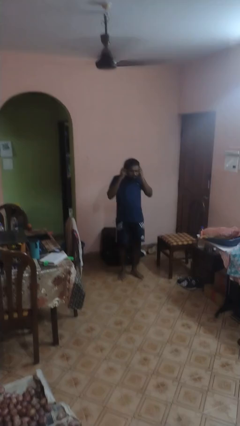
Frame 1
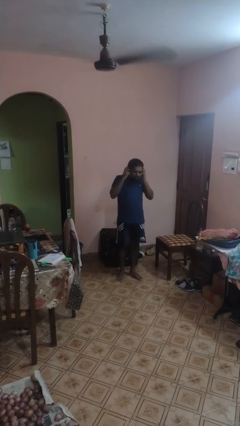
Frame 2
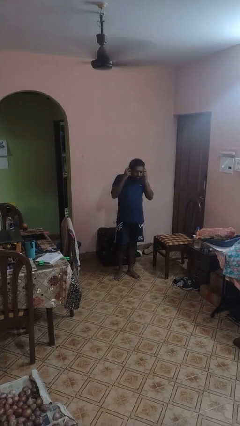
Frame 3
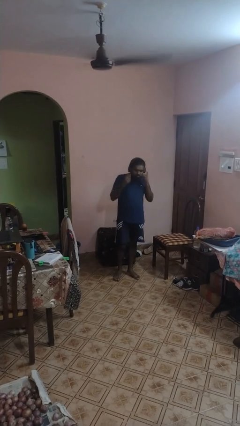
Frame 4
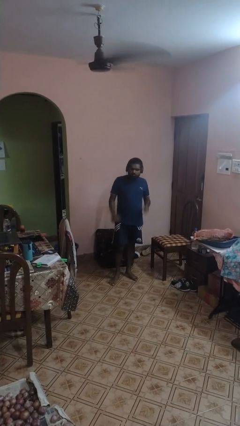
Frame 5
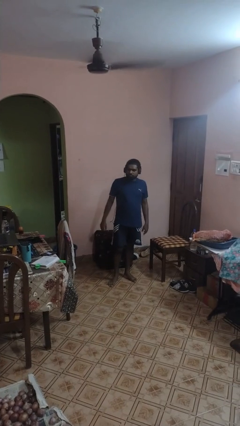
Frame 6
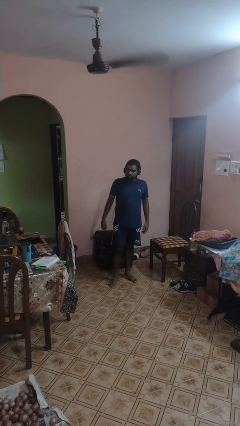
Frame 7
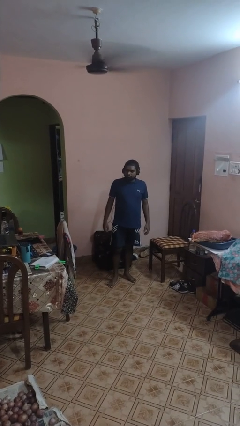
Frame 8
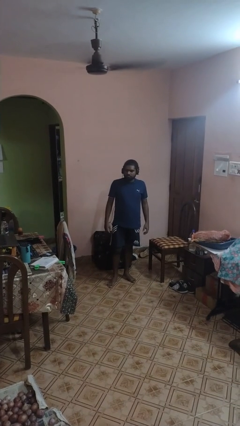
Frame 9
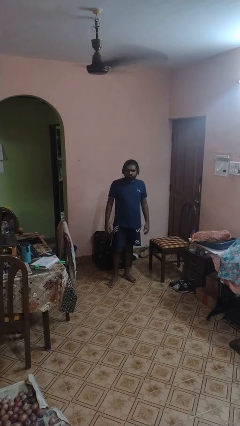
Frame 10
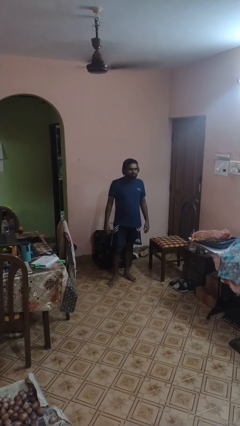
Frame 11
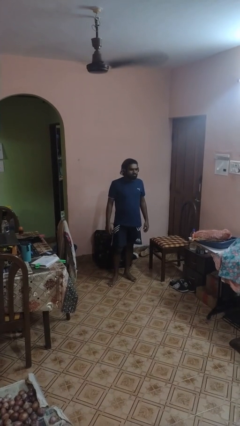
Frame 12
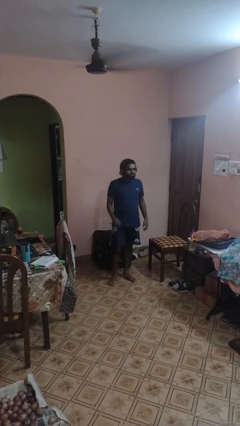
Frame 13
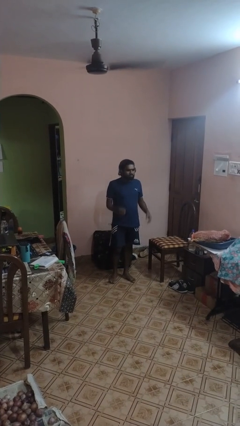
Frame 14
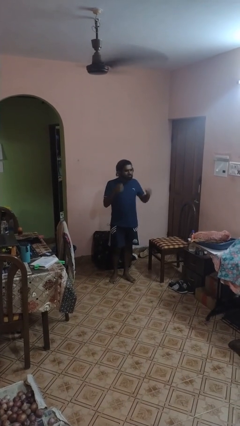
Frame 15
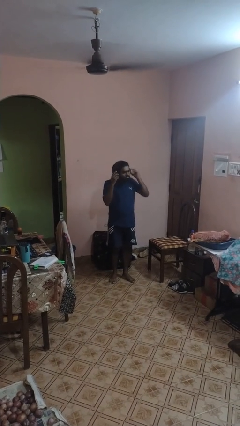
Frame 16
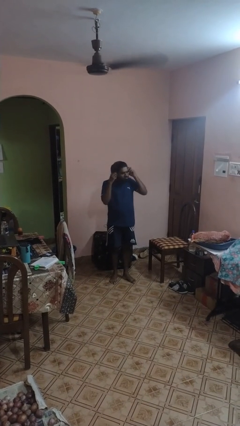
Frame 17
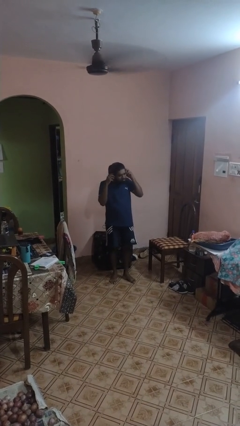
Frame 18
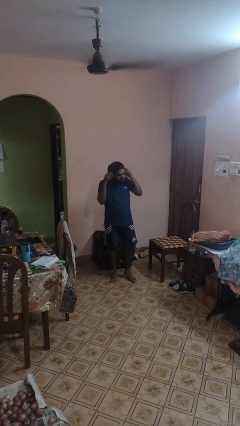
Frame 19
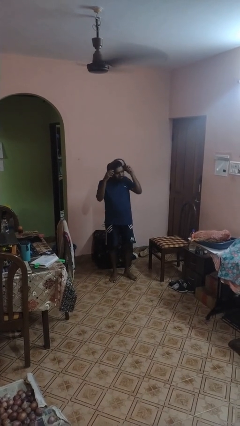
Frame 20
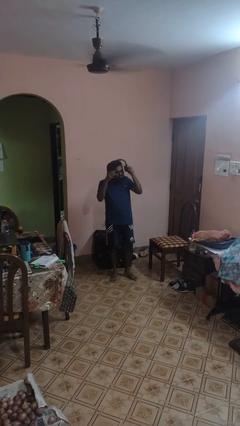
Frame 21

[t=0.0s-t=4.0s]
person puts on headphones

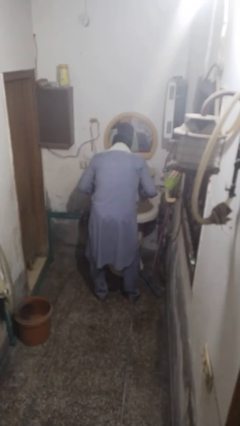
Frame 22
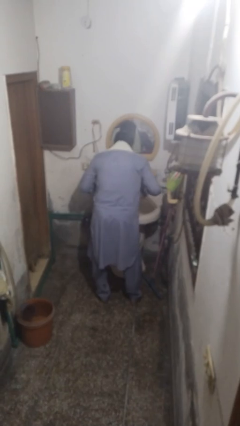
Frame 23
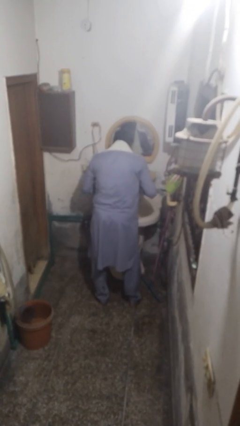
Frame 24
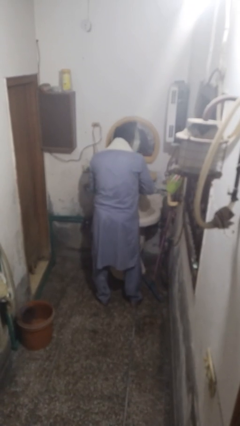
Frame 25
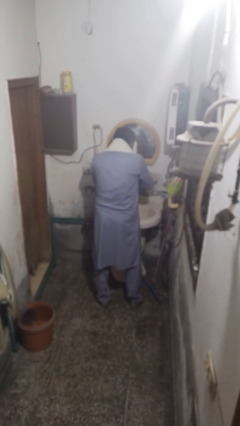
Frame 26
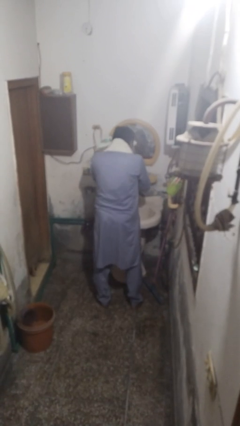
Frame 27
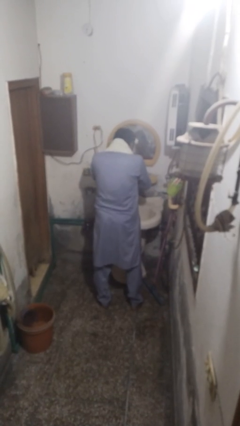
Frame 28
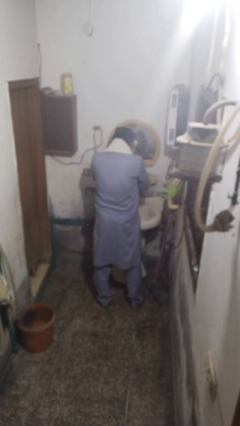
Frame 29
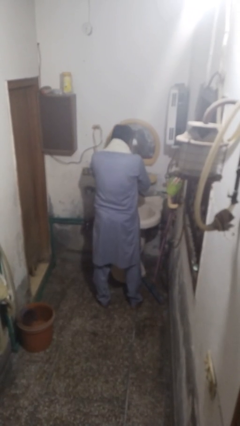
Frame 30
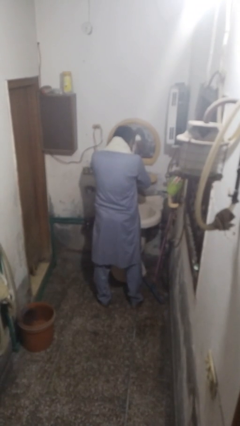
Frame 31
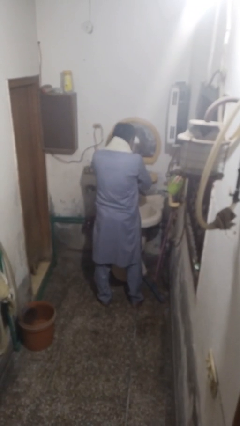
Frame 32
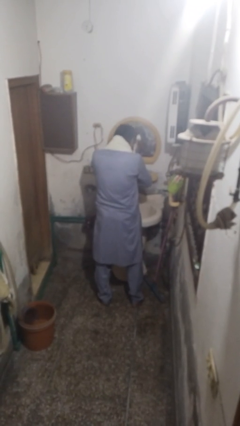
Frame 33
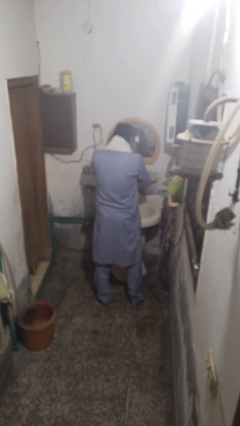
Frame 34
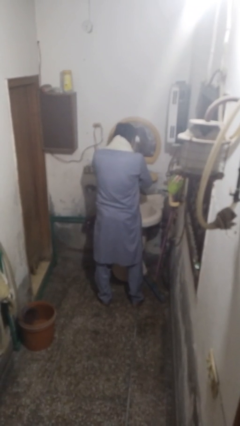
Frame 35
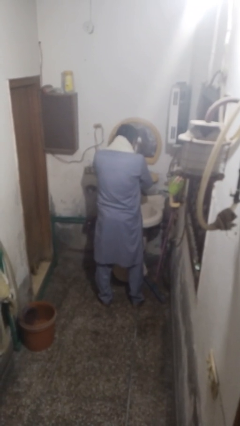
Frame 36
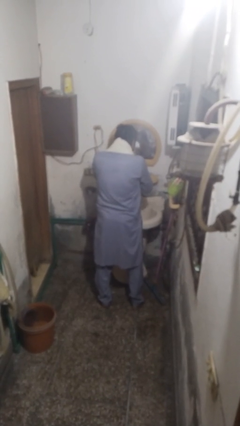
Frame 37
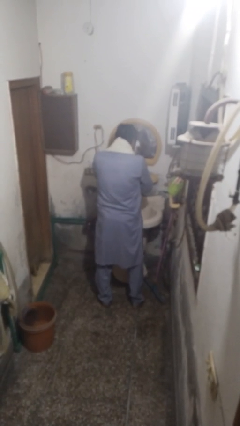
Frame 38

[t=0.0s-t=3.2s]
person dries face with towel

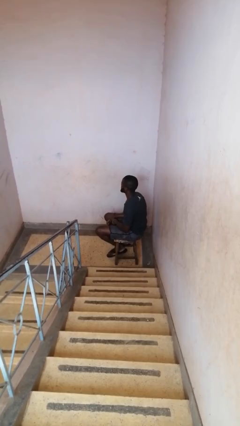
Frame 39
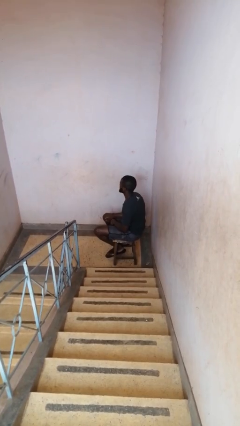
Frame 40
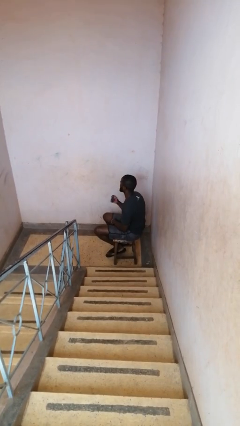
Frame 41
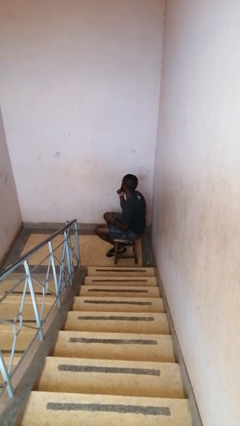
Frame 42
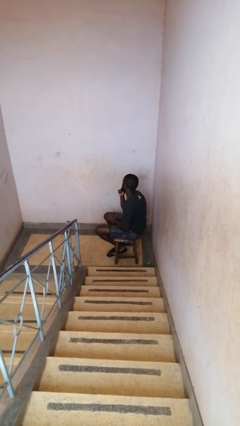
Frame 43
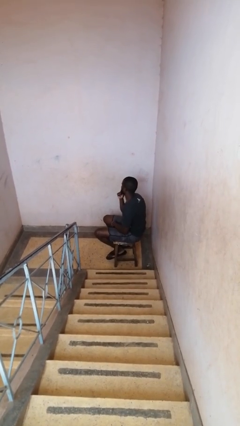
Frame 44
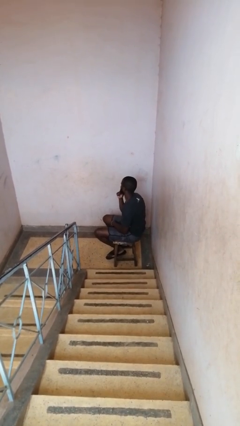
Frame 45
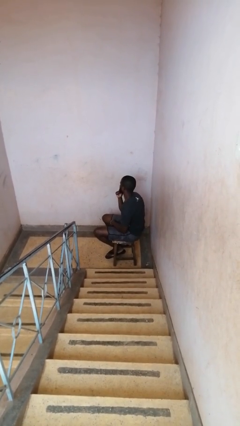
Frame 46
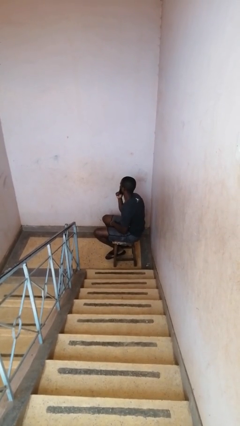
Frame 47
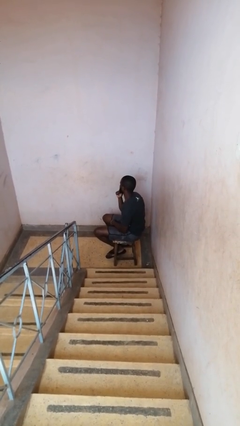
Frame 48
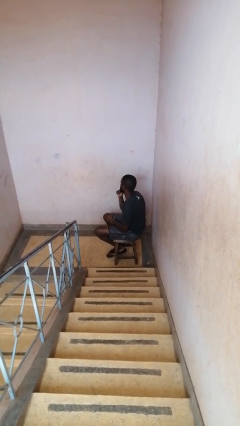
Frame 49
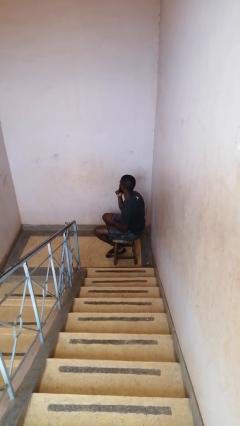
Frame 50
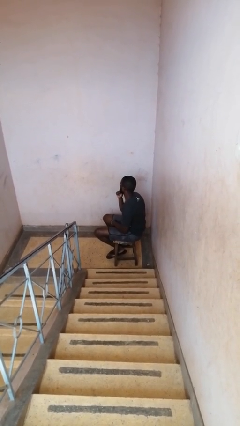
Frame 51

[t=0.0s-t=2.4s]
person strokes chin

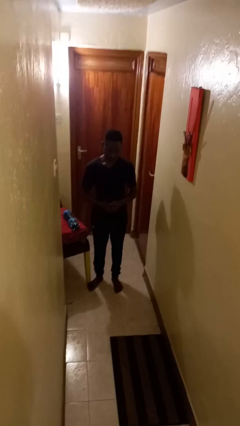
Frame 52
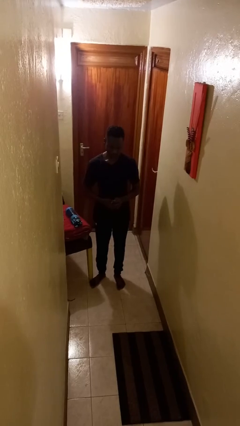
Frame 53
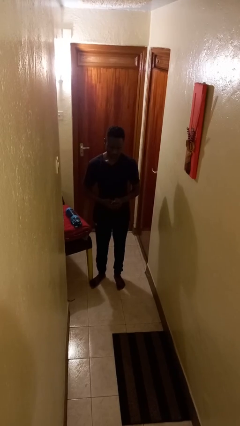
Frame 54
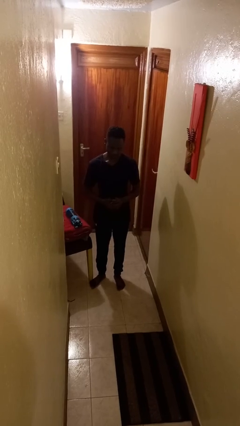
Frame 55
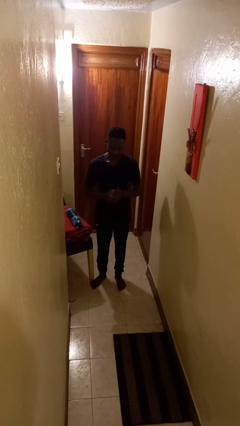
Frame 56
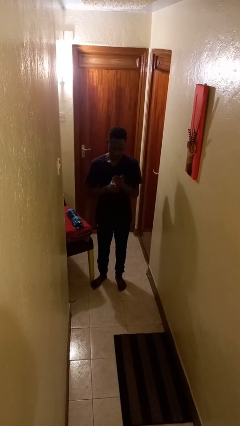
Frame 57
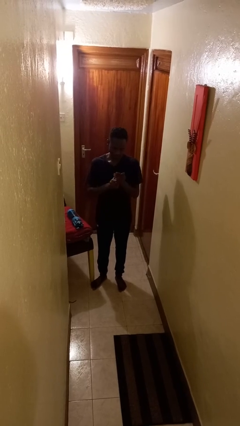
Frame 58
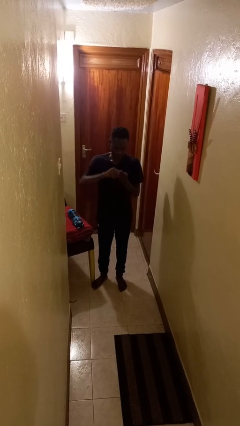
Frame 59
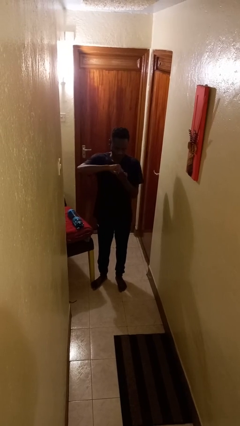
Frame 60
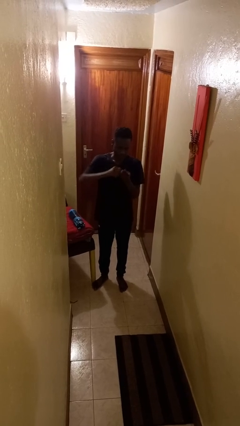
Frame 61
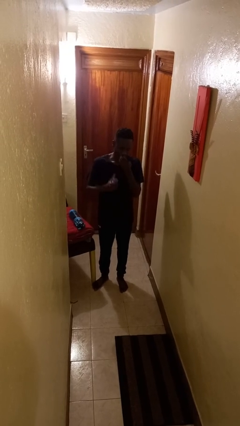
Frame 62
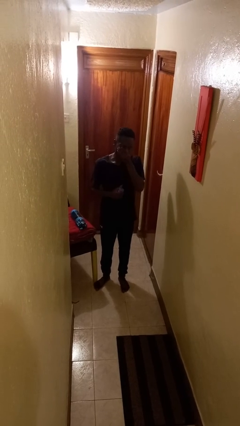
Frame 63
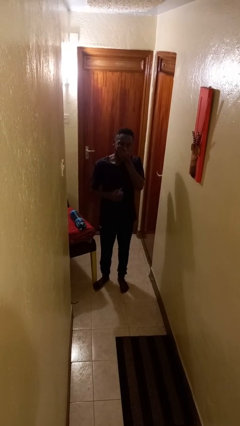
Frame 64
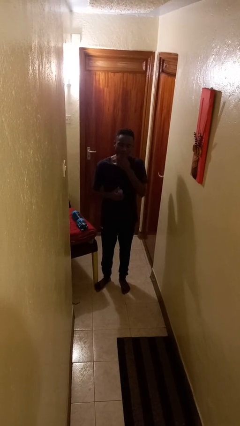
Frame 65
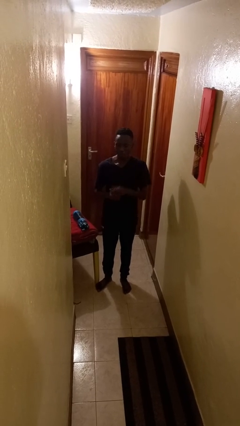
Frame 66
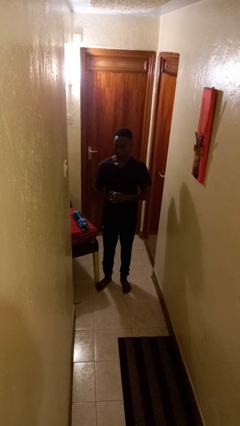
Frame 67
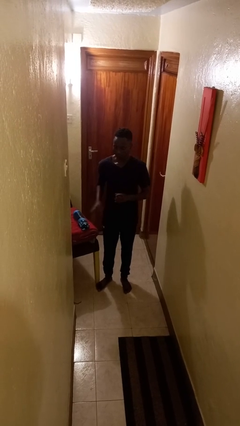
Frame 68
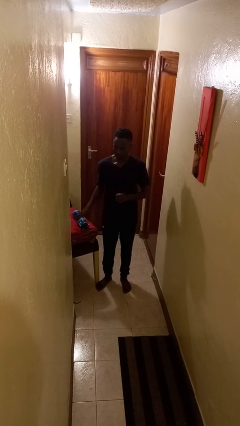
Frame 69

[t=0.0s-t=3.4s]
person takes medicine pills

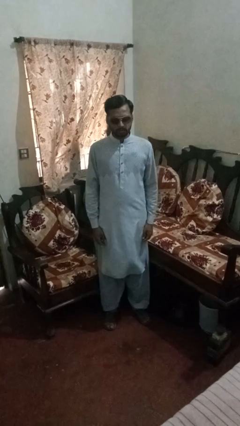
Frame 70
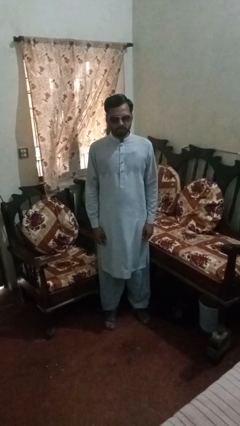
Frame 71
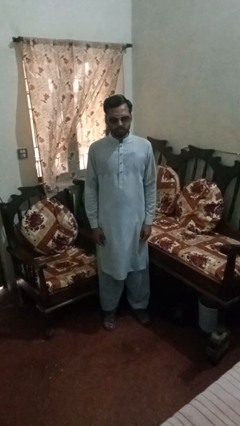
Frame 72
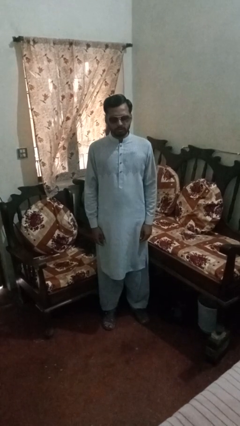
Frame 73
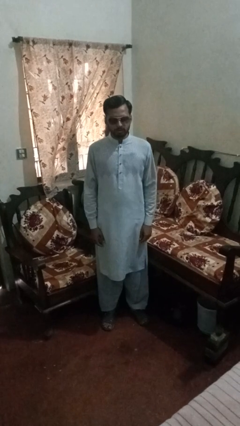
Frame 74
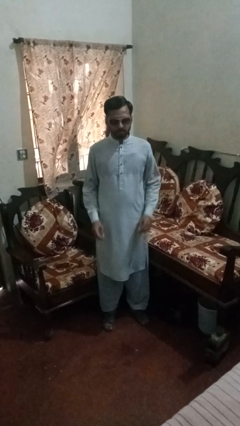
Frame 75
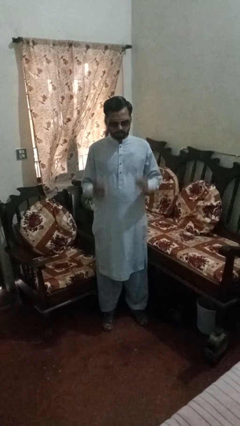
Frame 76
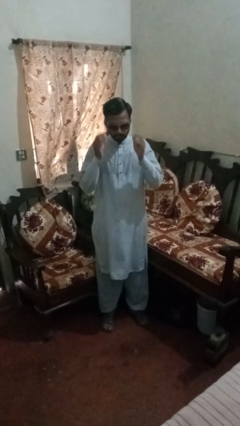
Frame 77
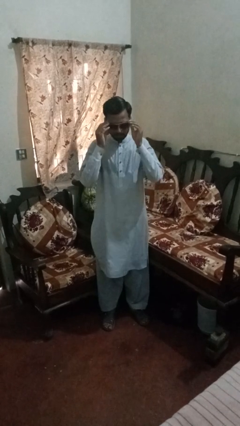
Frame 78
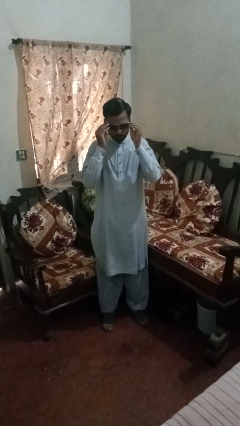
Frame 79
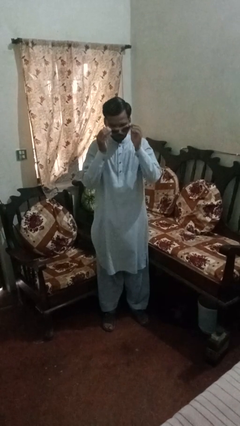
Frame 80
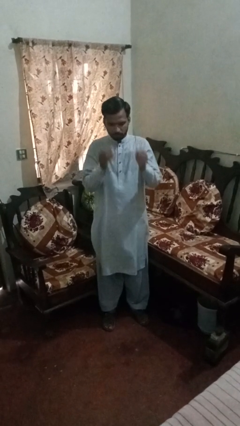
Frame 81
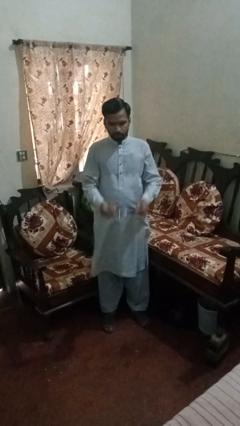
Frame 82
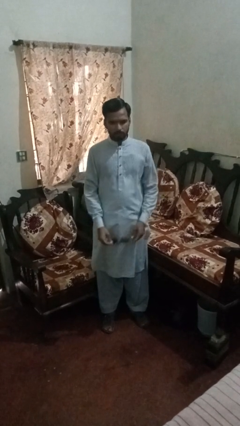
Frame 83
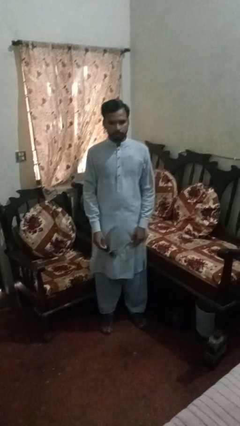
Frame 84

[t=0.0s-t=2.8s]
person takes off sunglasses

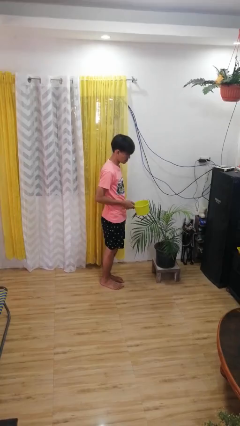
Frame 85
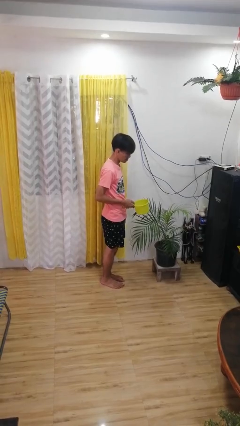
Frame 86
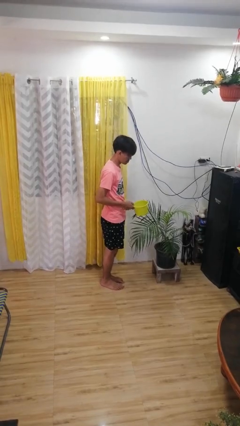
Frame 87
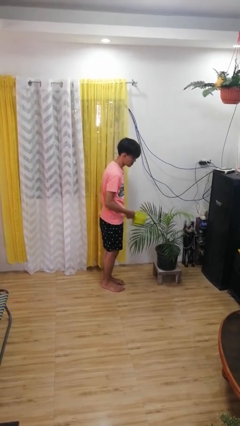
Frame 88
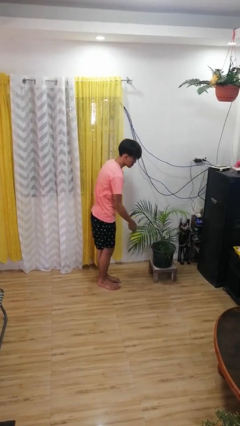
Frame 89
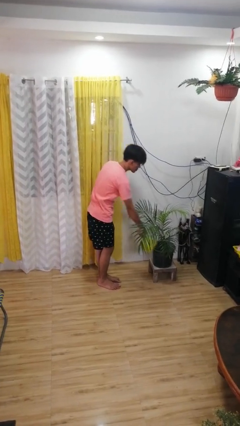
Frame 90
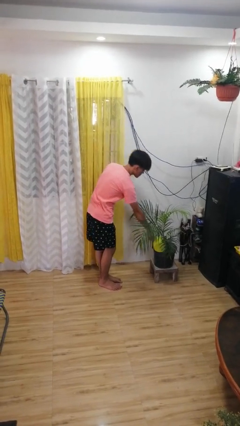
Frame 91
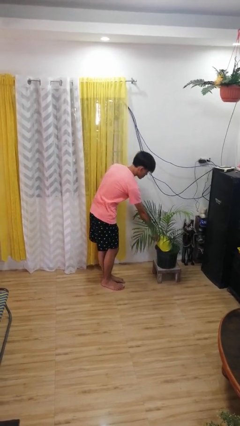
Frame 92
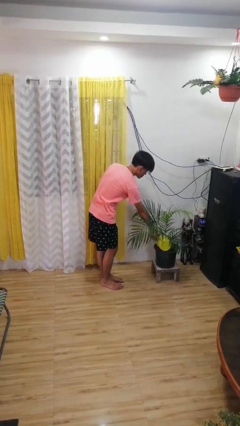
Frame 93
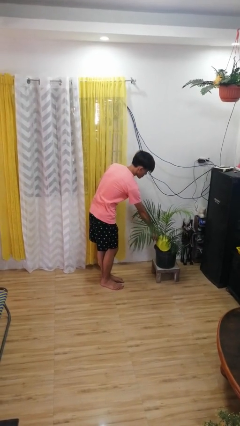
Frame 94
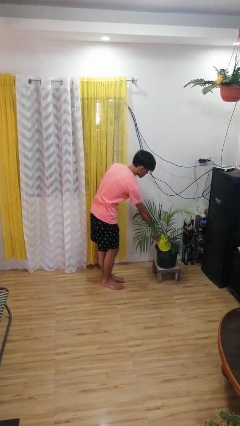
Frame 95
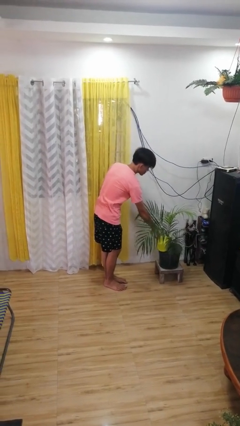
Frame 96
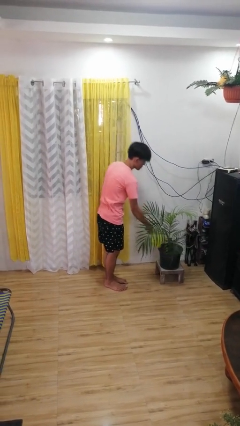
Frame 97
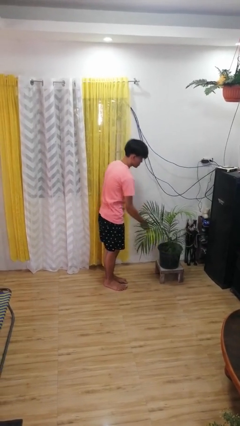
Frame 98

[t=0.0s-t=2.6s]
person waters houseplant
